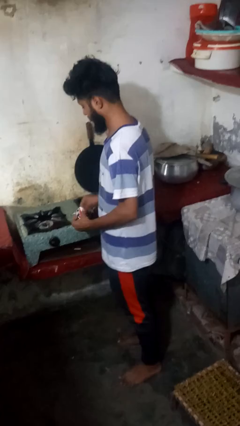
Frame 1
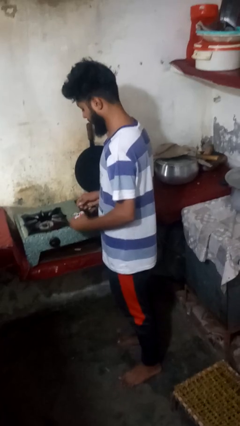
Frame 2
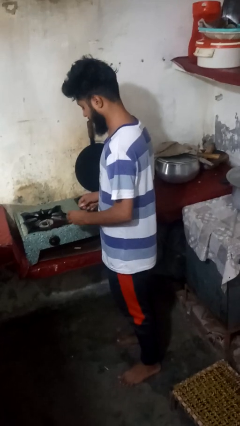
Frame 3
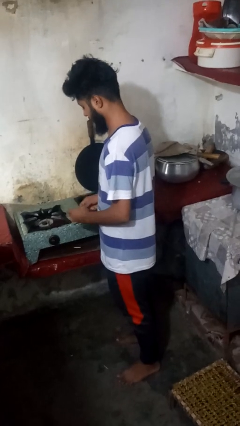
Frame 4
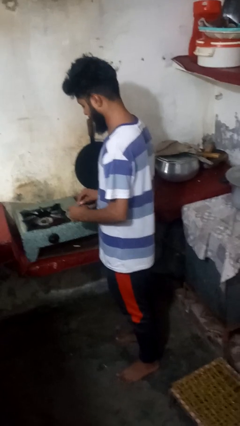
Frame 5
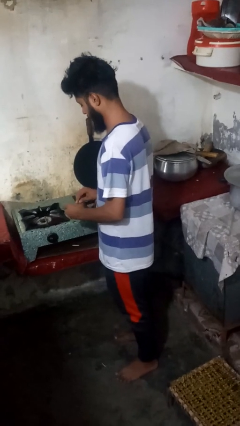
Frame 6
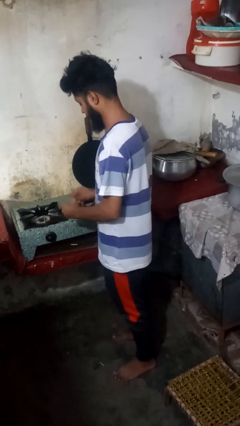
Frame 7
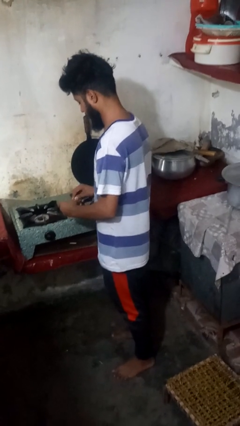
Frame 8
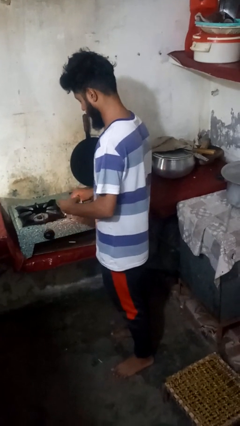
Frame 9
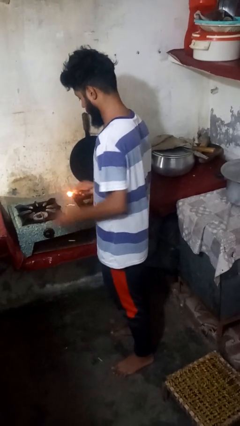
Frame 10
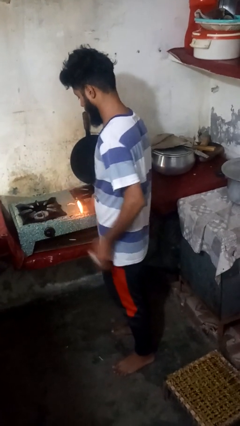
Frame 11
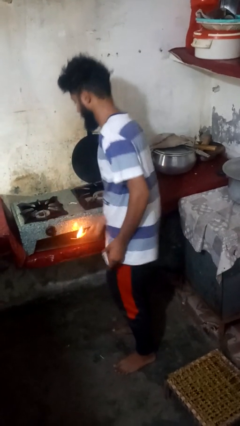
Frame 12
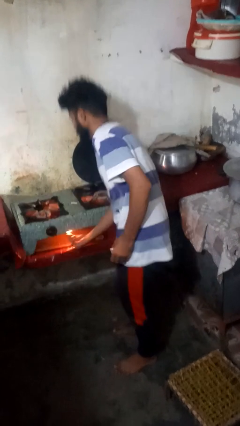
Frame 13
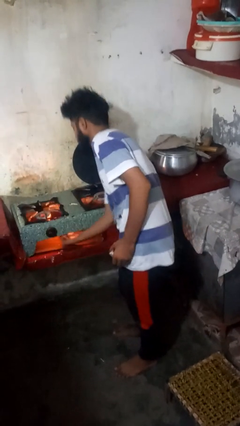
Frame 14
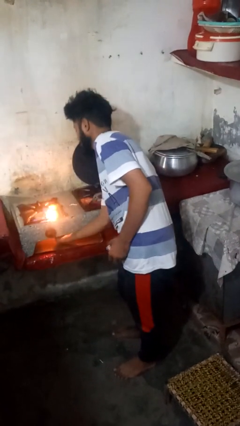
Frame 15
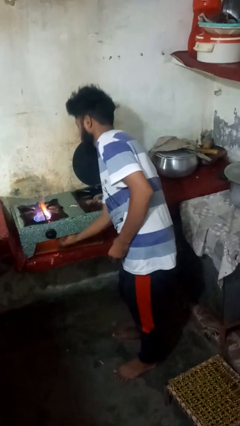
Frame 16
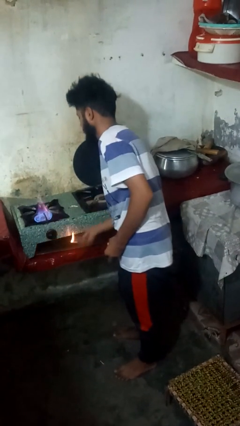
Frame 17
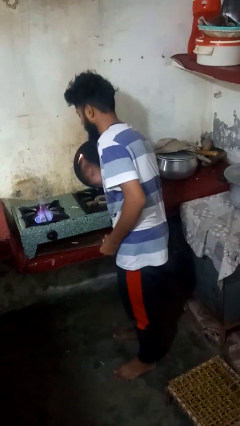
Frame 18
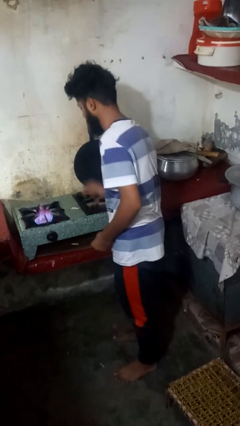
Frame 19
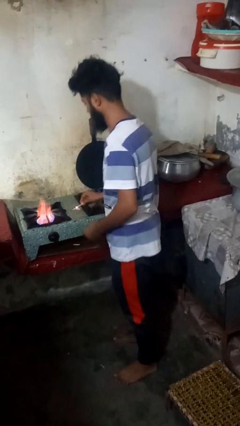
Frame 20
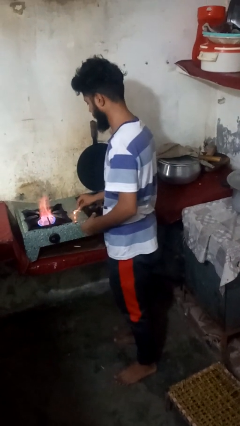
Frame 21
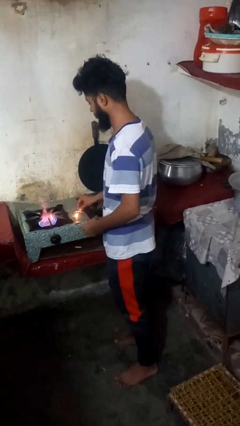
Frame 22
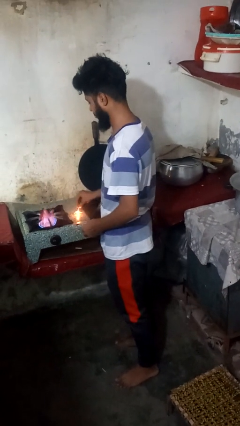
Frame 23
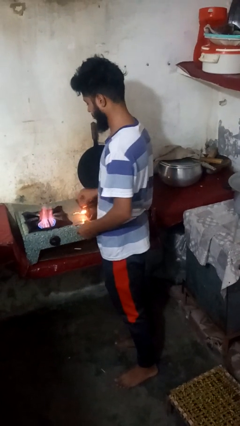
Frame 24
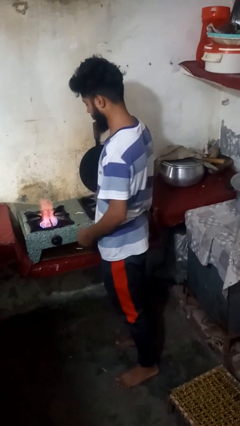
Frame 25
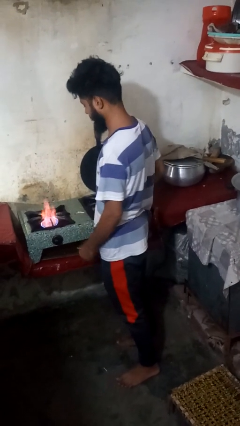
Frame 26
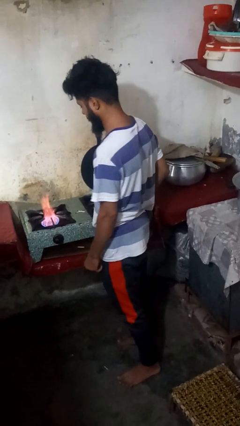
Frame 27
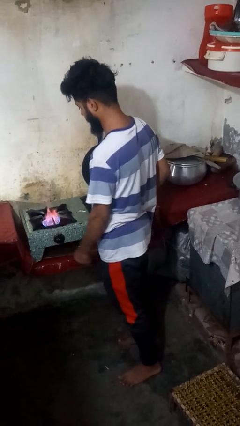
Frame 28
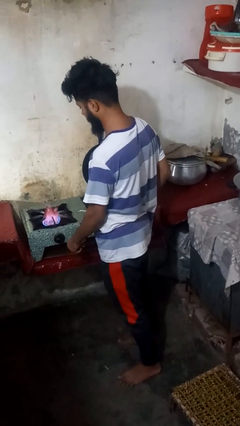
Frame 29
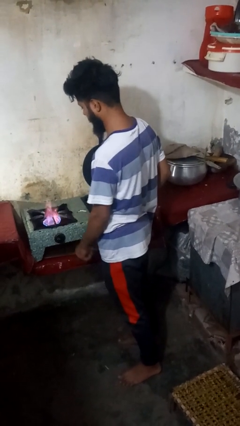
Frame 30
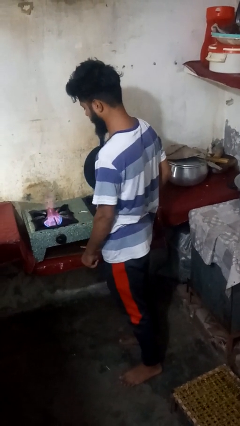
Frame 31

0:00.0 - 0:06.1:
person turns on stovetop

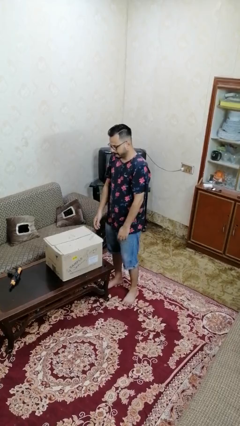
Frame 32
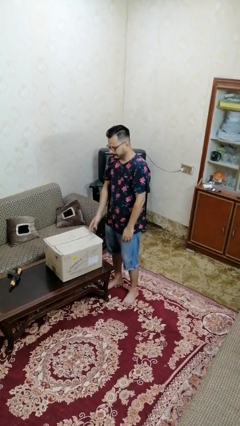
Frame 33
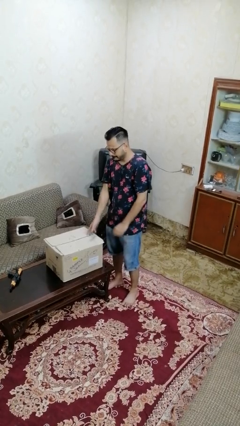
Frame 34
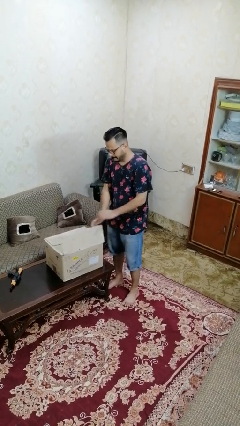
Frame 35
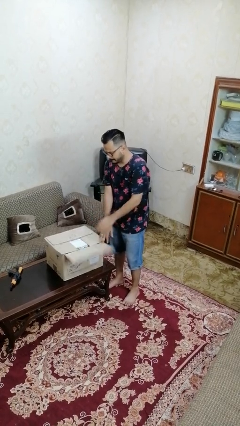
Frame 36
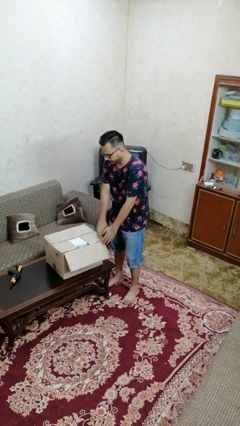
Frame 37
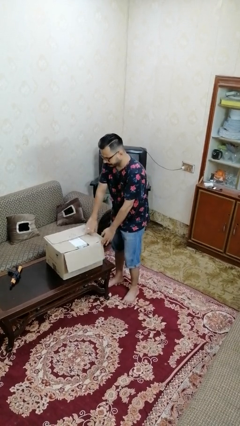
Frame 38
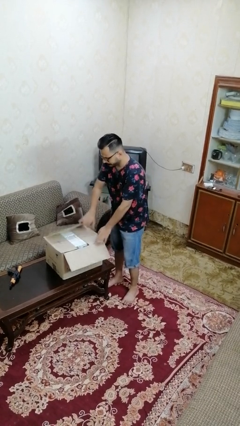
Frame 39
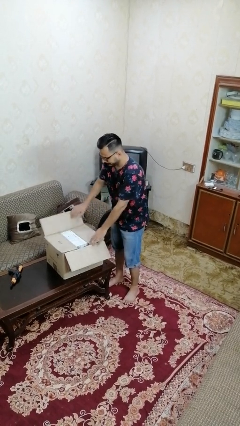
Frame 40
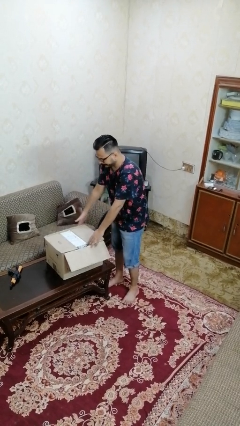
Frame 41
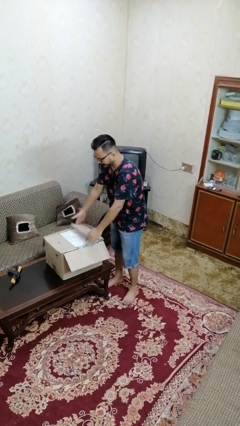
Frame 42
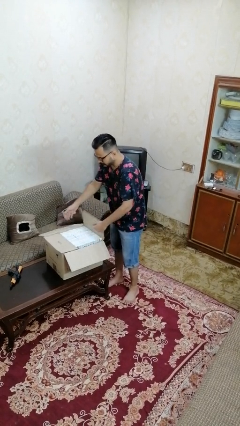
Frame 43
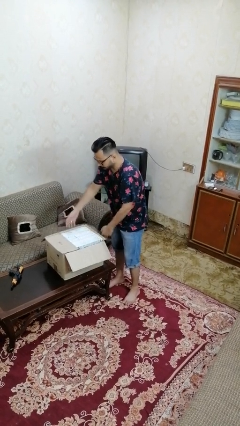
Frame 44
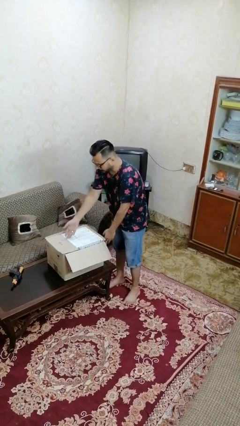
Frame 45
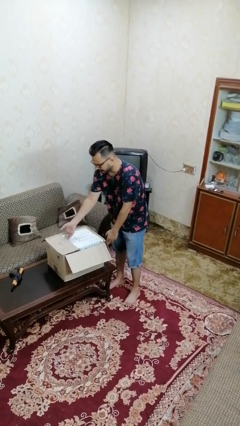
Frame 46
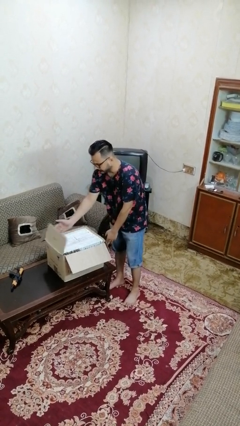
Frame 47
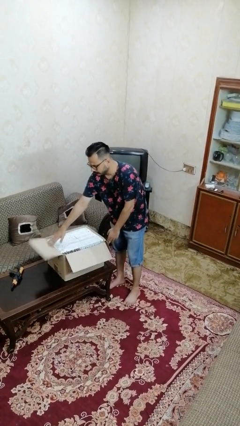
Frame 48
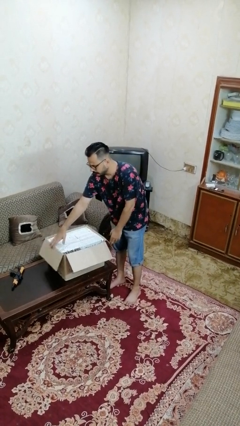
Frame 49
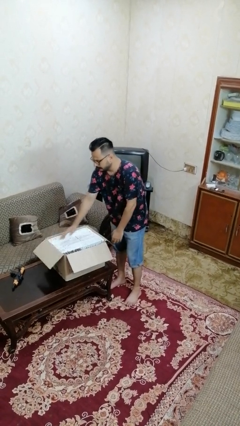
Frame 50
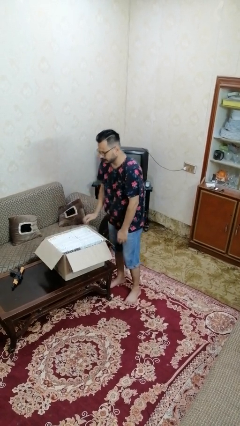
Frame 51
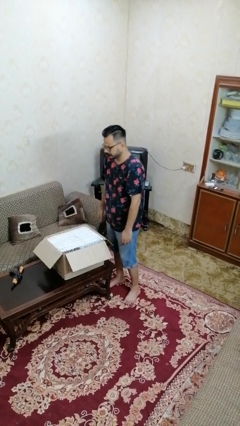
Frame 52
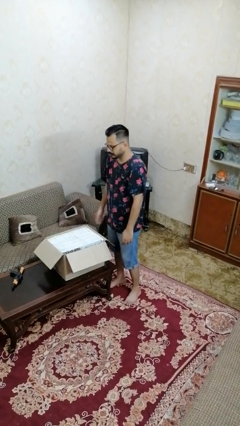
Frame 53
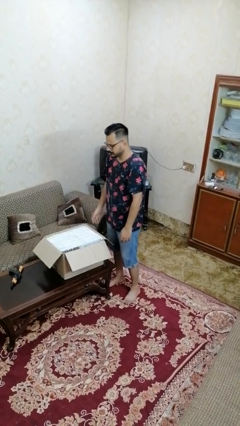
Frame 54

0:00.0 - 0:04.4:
person opens box

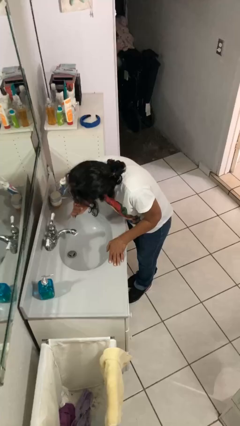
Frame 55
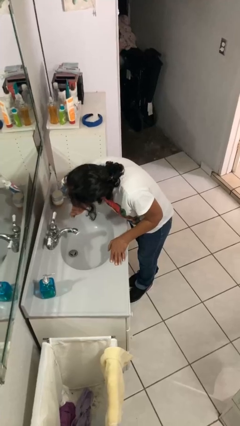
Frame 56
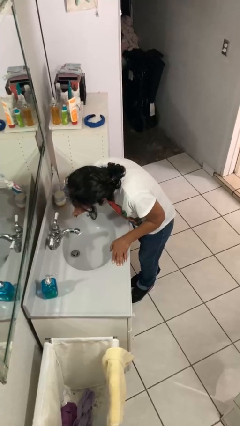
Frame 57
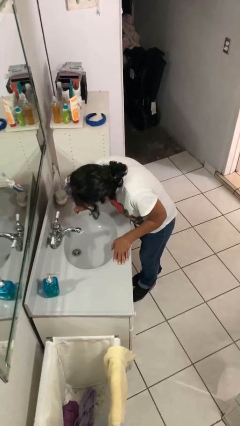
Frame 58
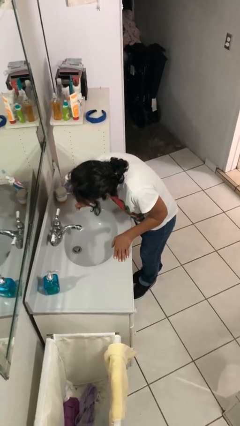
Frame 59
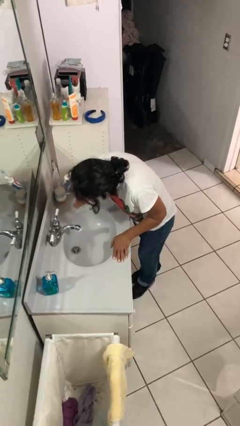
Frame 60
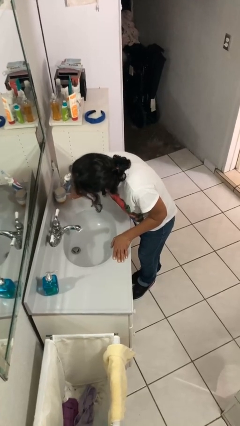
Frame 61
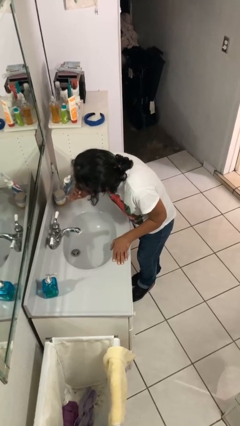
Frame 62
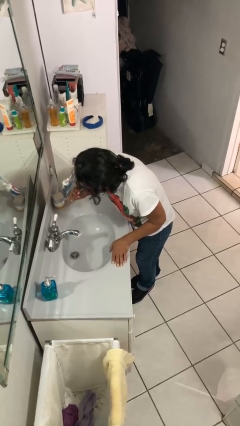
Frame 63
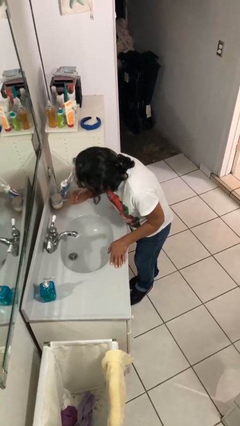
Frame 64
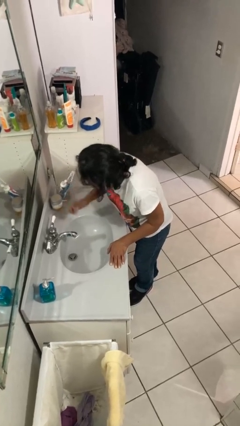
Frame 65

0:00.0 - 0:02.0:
person brushes teeth

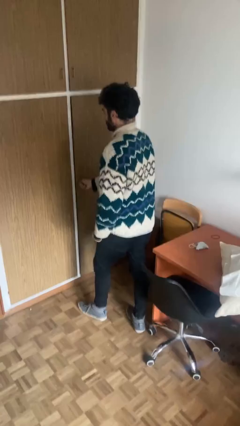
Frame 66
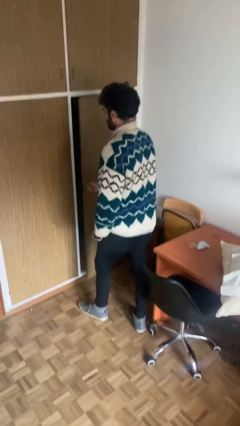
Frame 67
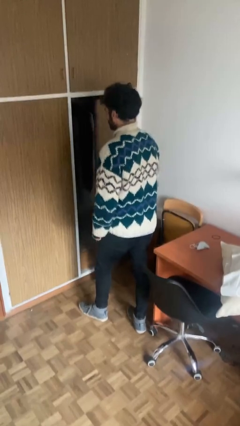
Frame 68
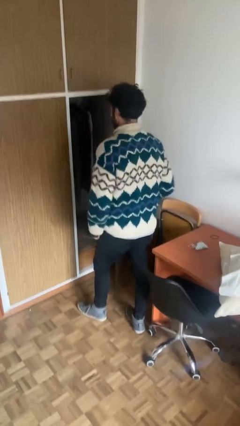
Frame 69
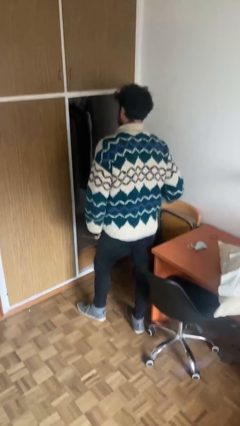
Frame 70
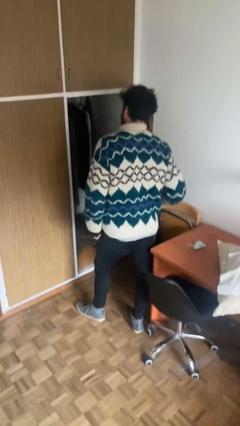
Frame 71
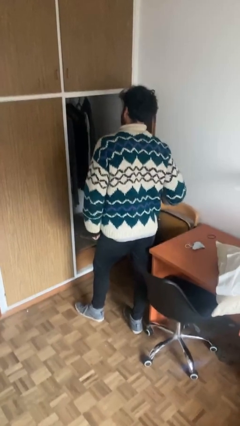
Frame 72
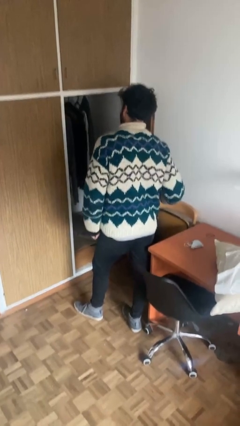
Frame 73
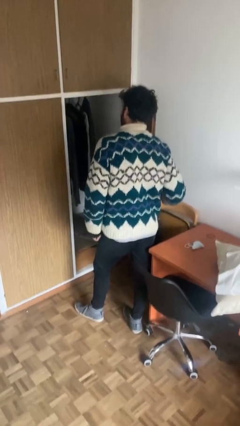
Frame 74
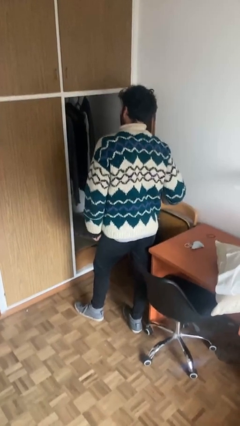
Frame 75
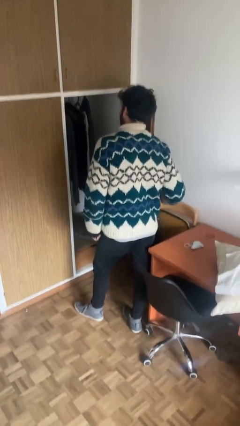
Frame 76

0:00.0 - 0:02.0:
person opens closet door

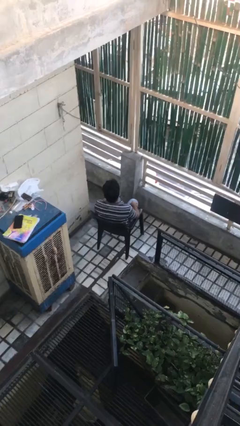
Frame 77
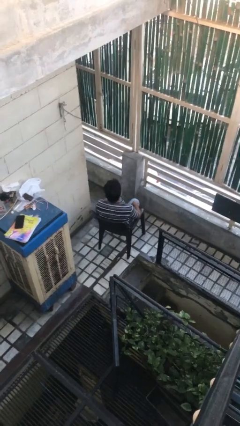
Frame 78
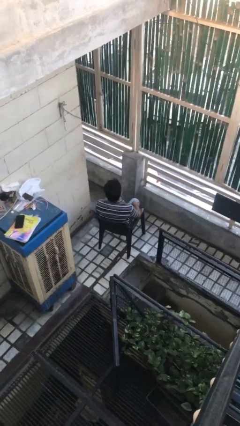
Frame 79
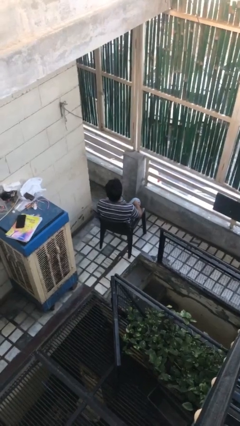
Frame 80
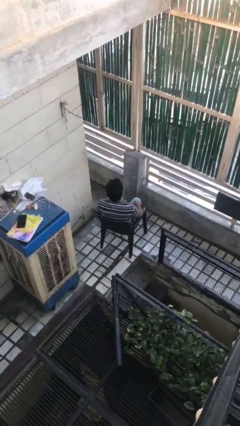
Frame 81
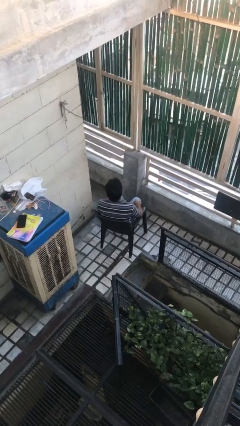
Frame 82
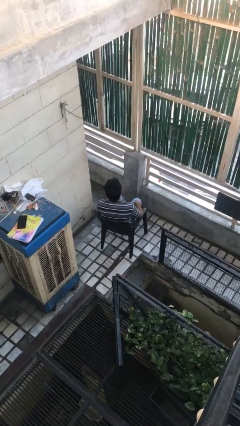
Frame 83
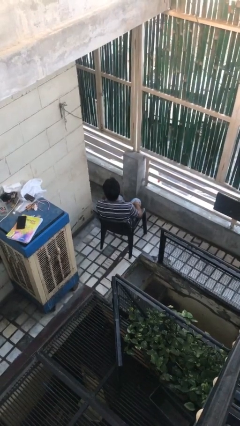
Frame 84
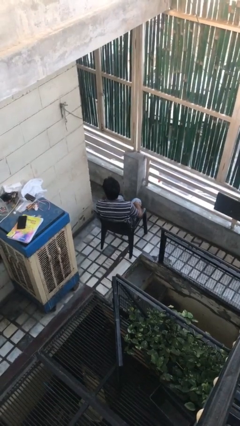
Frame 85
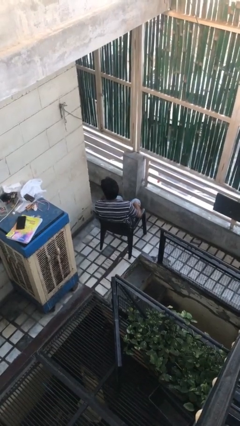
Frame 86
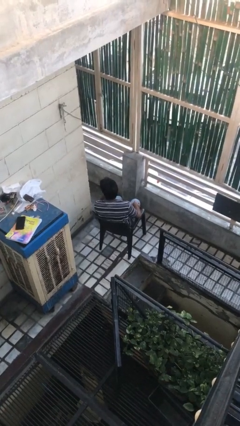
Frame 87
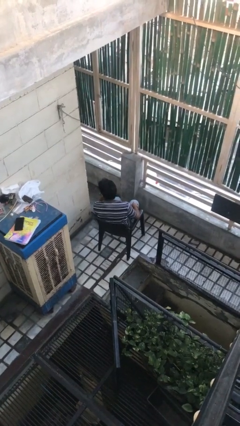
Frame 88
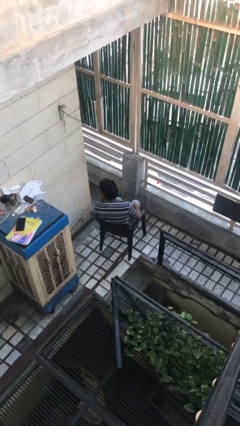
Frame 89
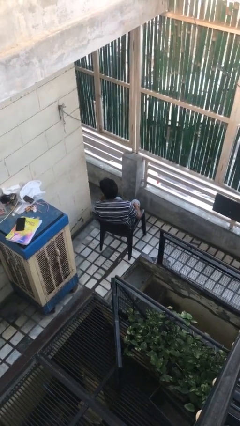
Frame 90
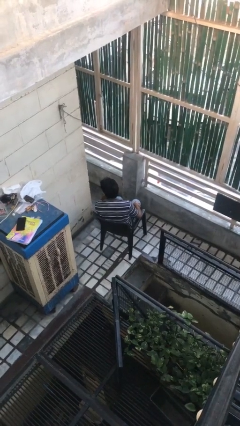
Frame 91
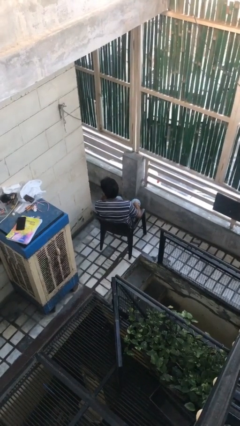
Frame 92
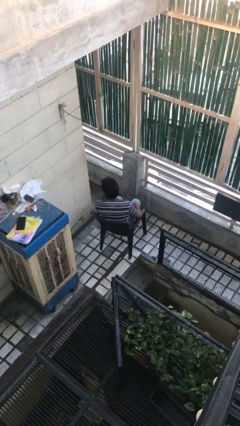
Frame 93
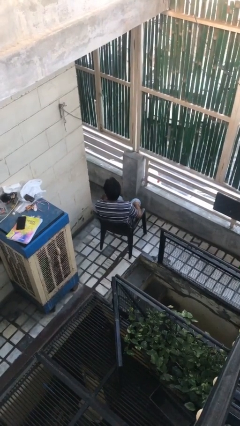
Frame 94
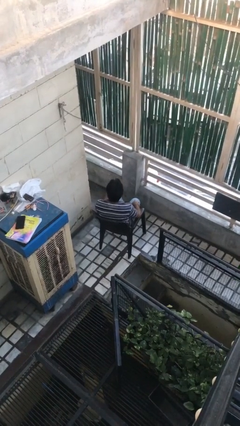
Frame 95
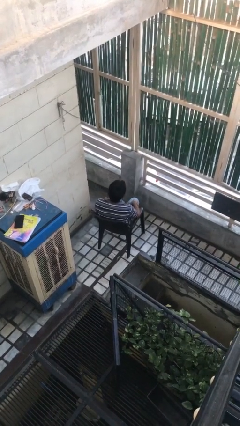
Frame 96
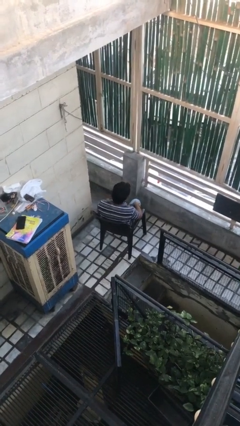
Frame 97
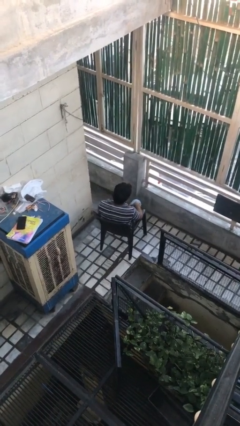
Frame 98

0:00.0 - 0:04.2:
person strokes chin
